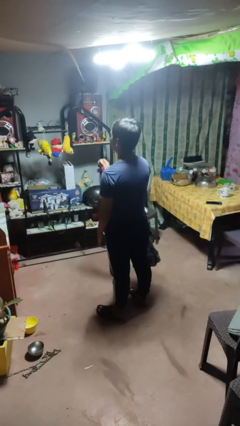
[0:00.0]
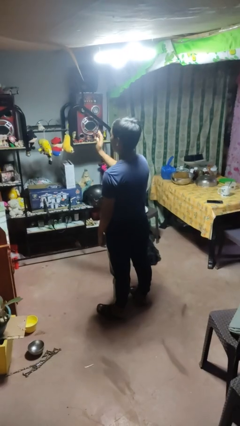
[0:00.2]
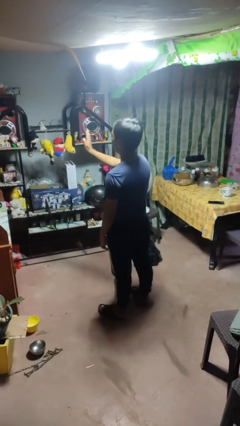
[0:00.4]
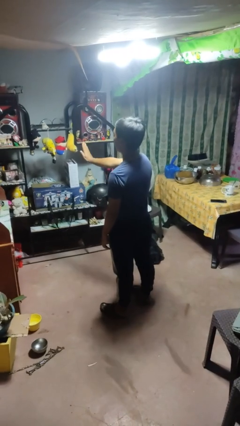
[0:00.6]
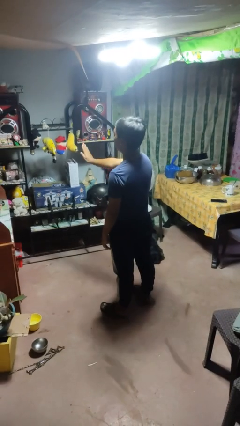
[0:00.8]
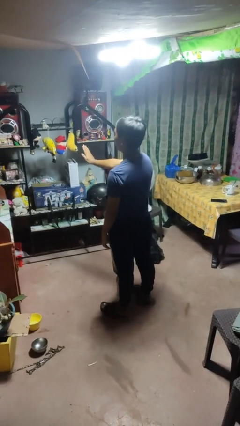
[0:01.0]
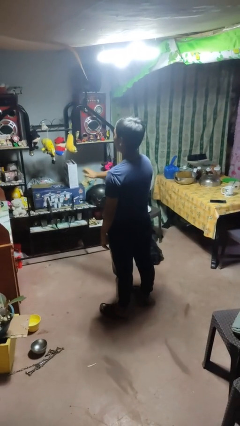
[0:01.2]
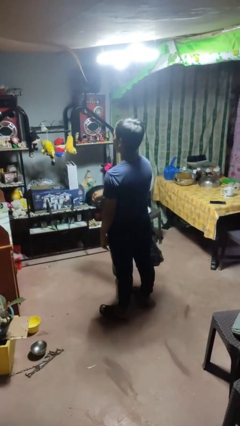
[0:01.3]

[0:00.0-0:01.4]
person gestures stop

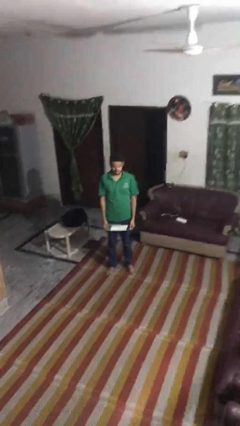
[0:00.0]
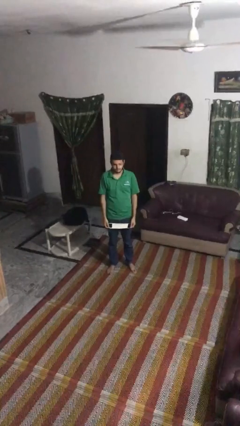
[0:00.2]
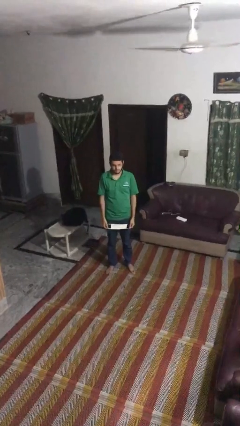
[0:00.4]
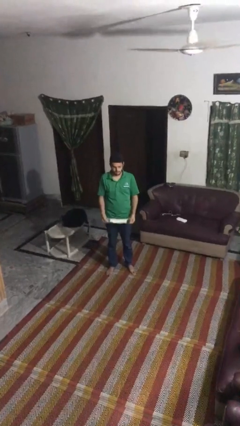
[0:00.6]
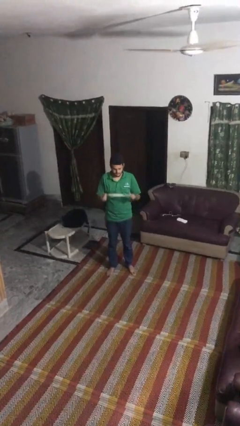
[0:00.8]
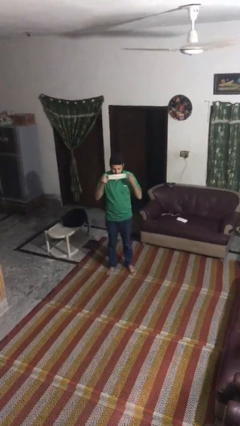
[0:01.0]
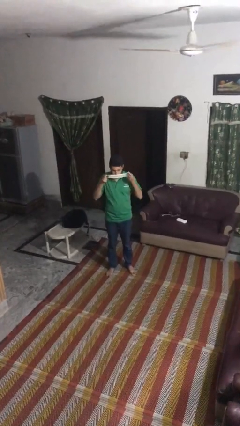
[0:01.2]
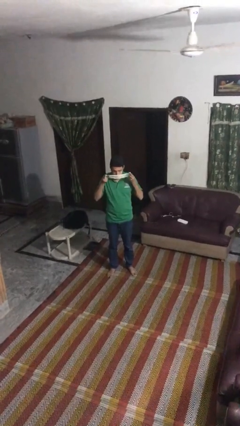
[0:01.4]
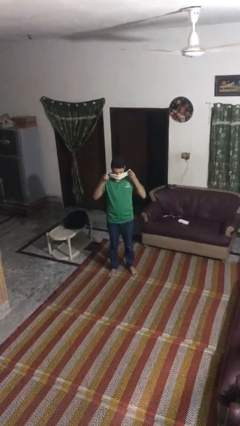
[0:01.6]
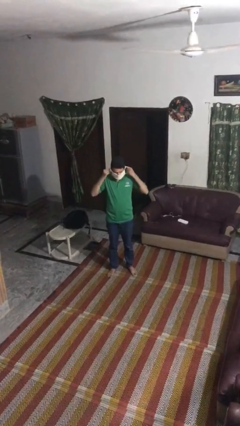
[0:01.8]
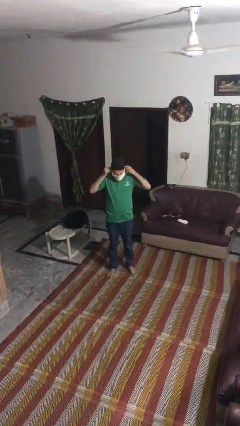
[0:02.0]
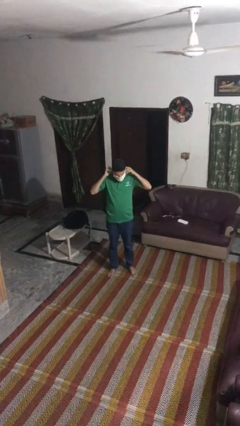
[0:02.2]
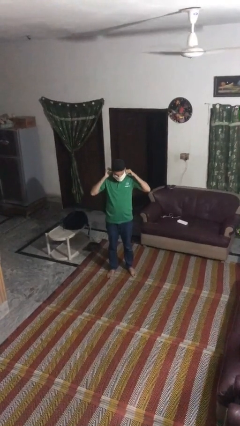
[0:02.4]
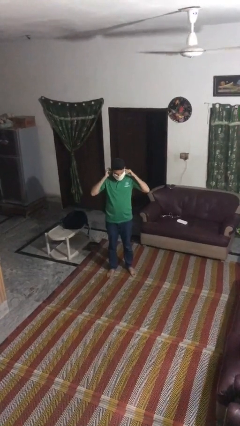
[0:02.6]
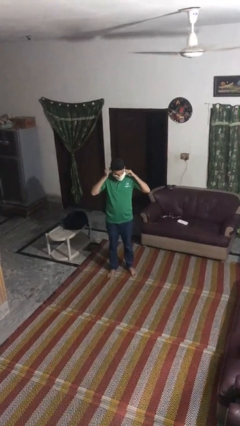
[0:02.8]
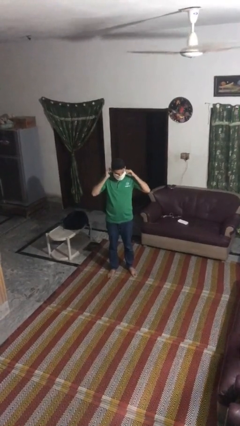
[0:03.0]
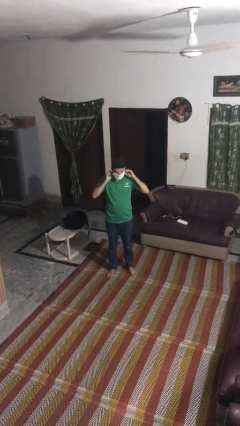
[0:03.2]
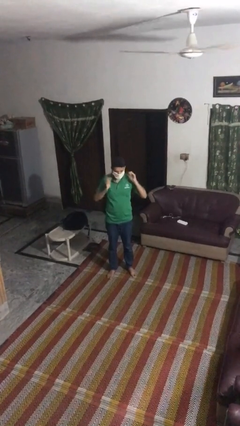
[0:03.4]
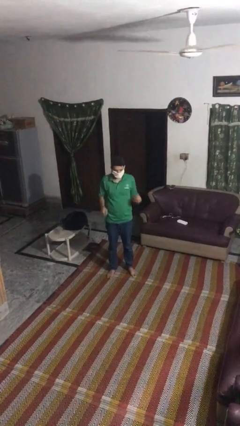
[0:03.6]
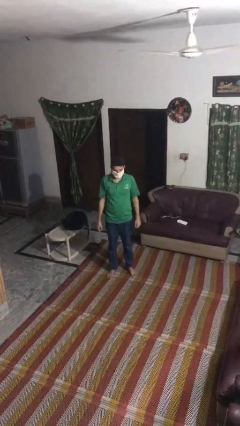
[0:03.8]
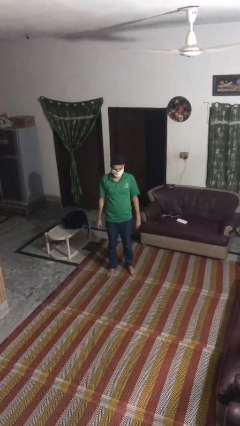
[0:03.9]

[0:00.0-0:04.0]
person puts on facemask

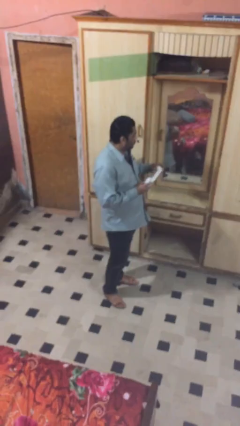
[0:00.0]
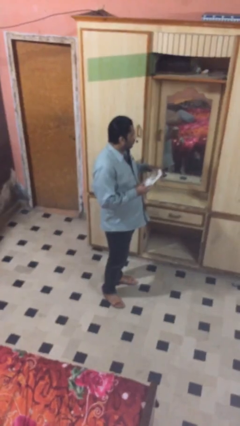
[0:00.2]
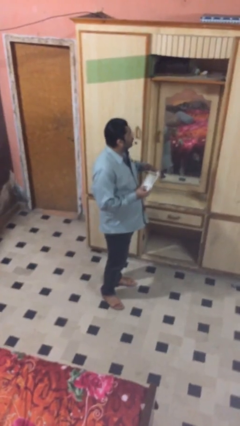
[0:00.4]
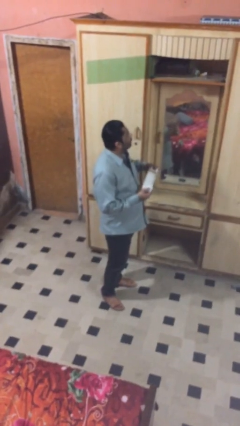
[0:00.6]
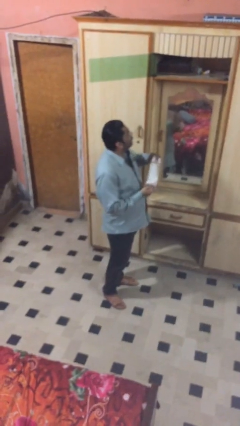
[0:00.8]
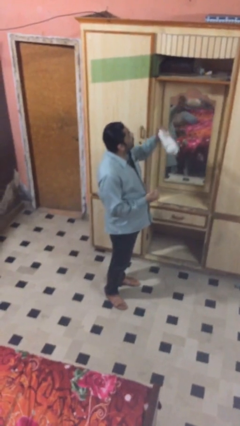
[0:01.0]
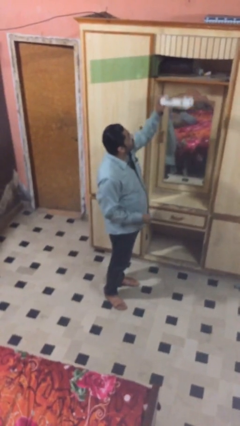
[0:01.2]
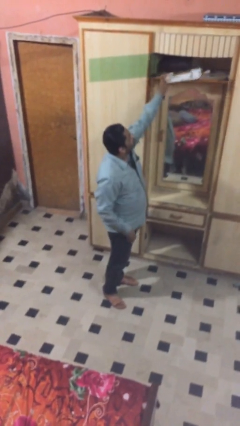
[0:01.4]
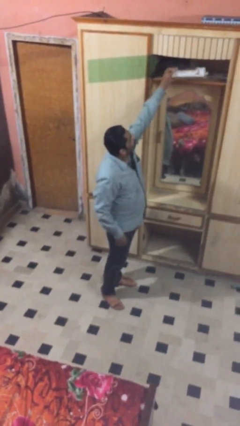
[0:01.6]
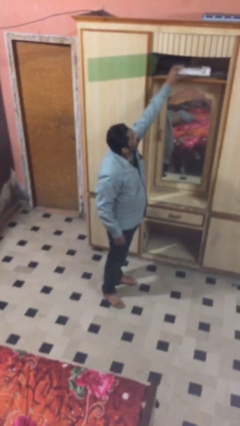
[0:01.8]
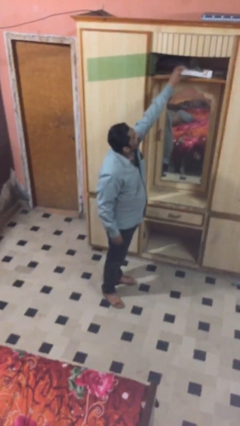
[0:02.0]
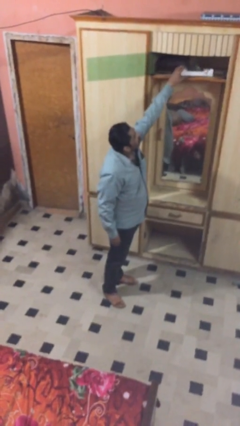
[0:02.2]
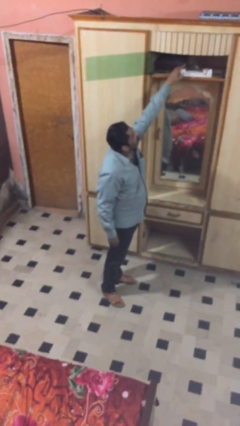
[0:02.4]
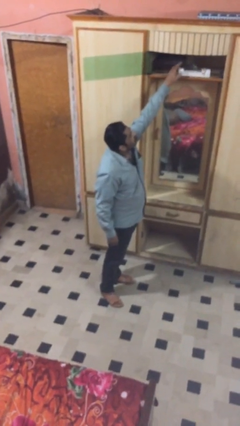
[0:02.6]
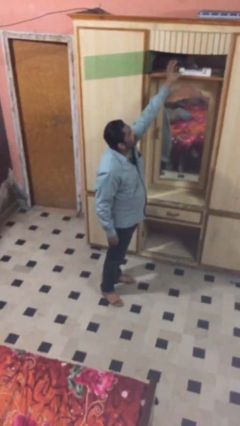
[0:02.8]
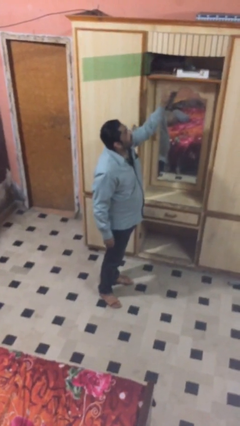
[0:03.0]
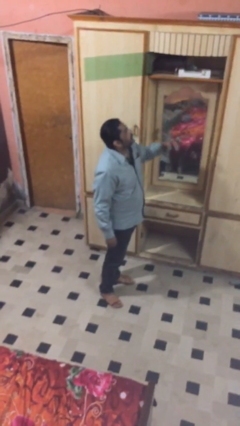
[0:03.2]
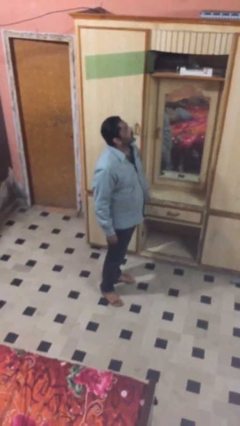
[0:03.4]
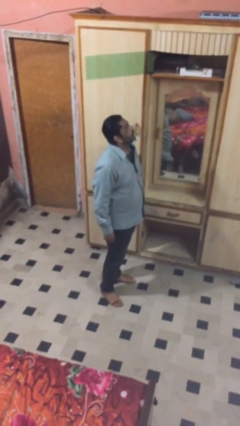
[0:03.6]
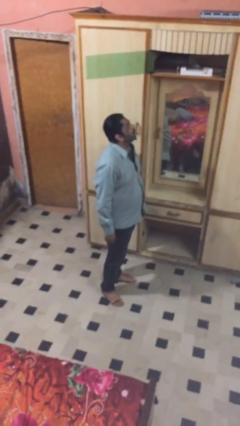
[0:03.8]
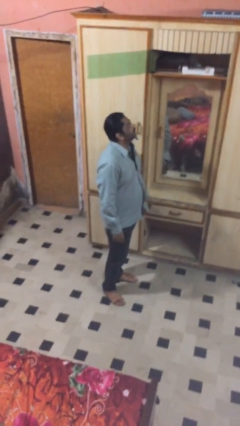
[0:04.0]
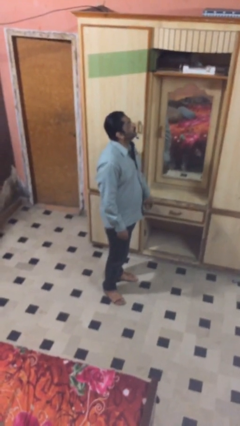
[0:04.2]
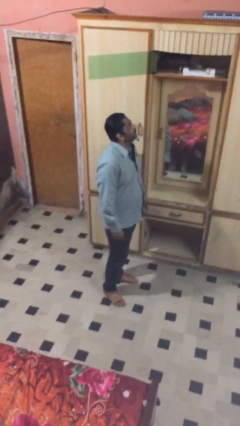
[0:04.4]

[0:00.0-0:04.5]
person puts down object on shelf

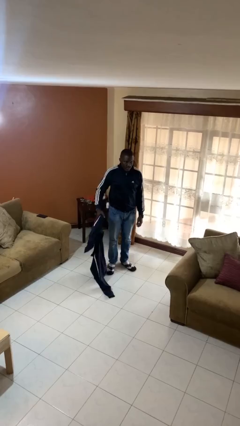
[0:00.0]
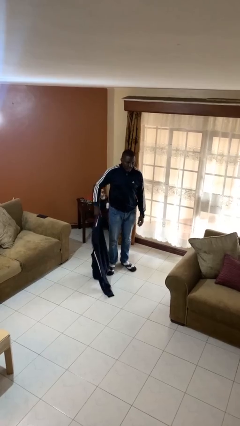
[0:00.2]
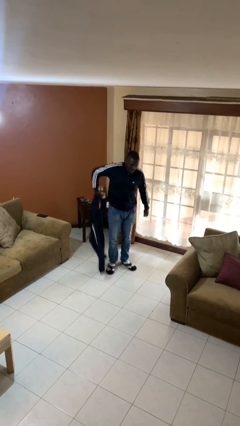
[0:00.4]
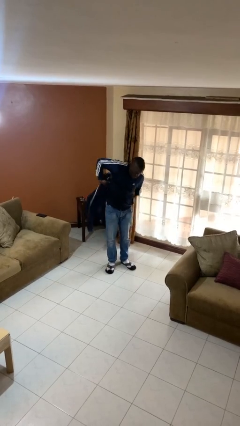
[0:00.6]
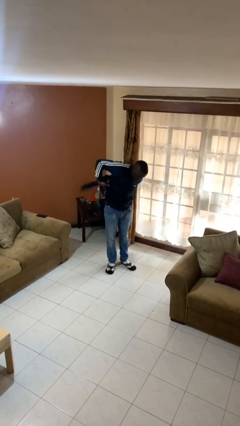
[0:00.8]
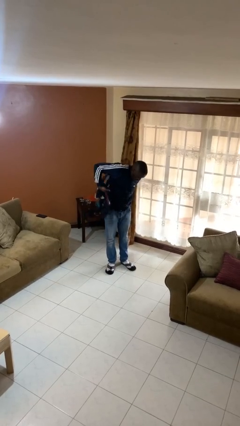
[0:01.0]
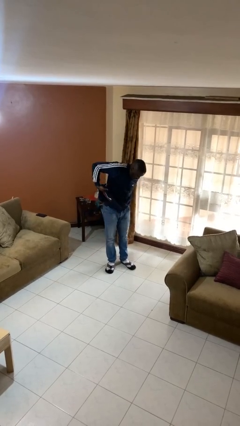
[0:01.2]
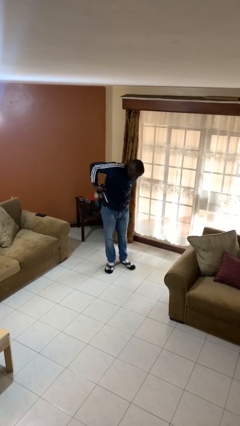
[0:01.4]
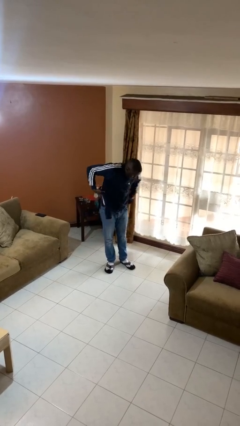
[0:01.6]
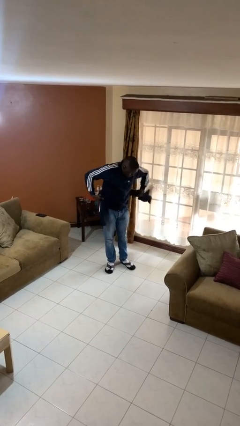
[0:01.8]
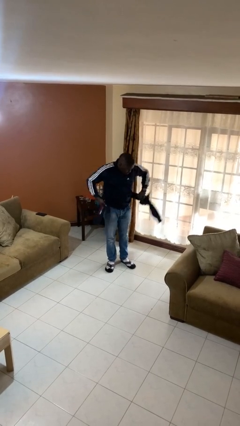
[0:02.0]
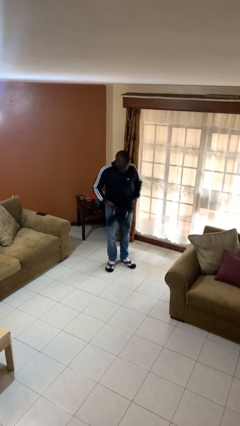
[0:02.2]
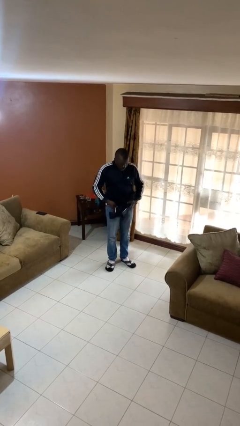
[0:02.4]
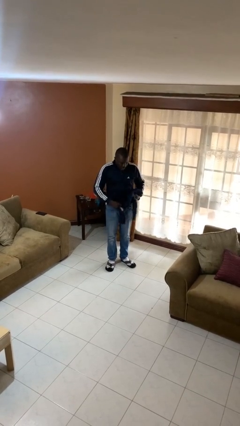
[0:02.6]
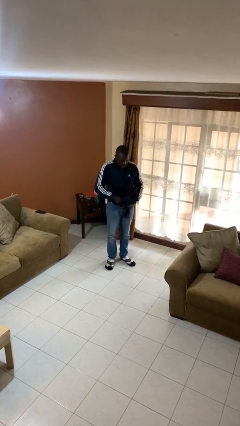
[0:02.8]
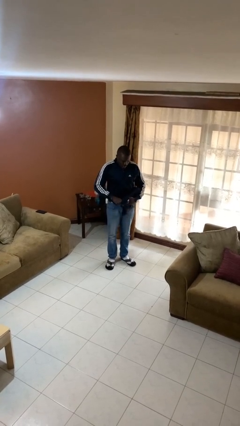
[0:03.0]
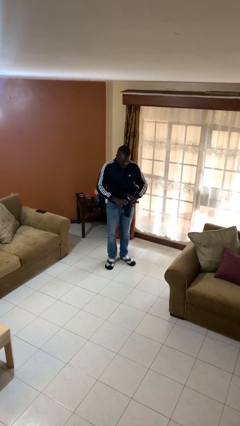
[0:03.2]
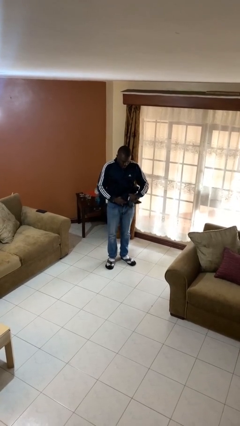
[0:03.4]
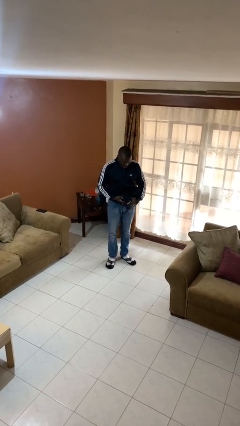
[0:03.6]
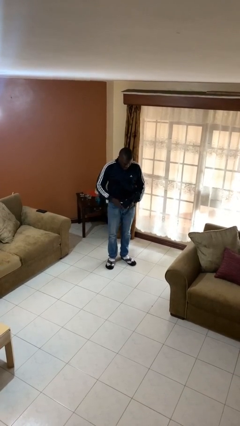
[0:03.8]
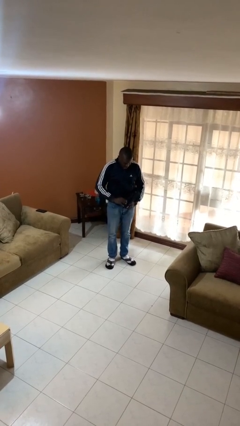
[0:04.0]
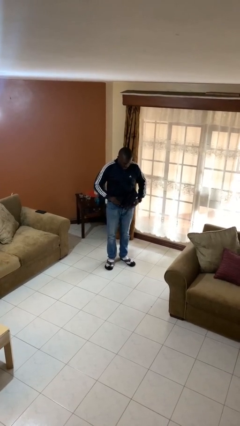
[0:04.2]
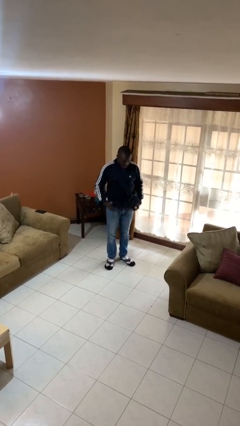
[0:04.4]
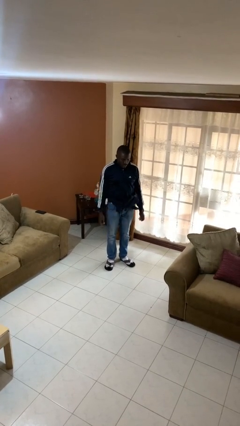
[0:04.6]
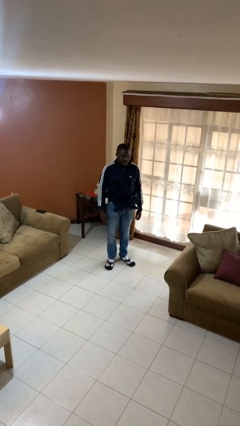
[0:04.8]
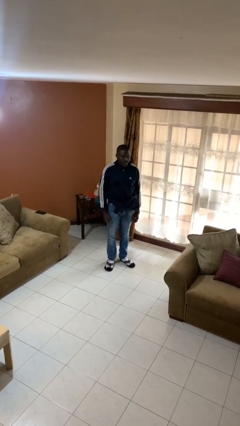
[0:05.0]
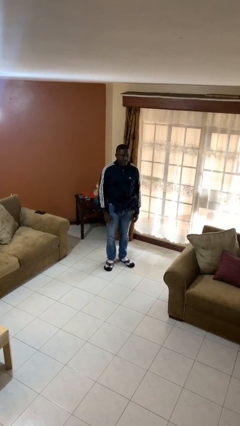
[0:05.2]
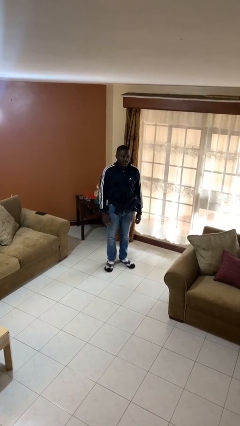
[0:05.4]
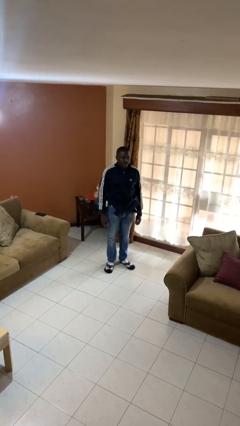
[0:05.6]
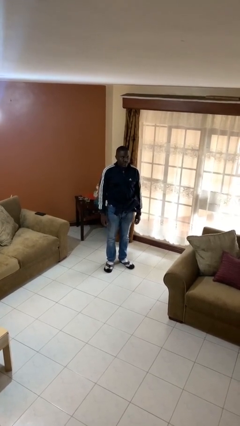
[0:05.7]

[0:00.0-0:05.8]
person ties jacket around waist

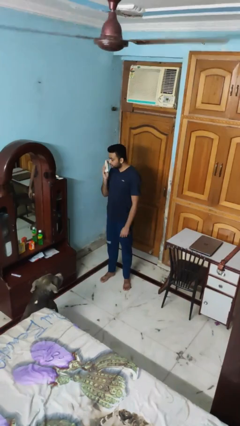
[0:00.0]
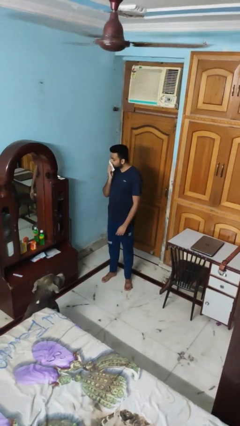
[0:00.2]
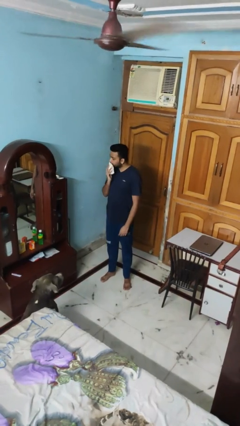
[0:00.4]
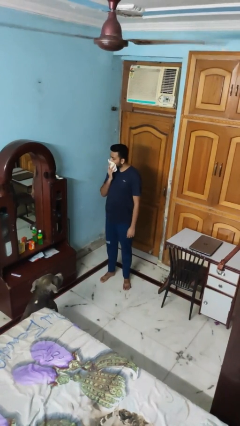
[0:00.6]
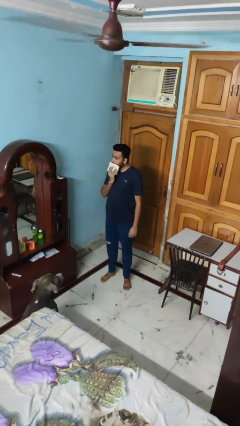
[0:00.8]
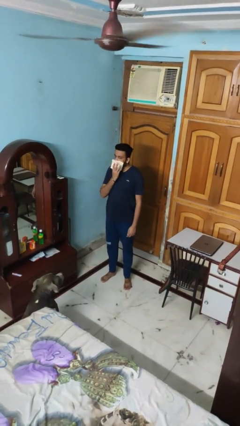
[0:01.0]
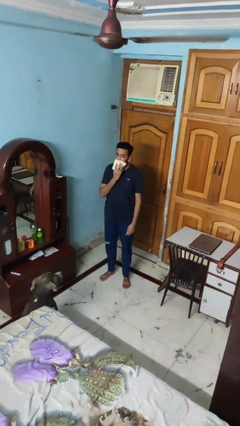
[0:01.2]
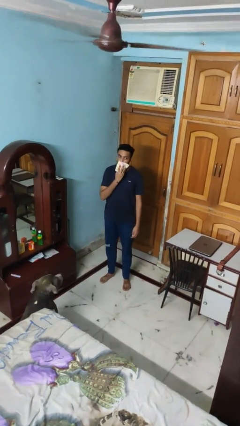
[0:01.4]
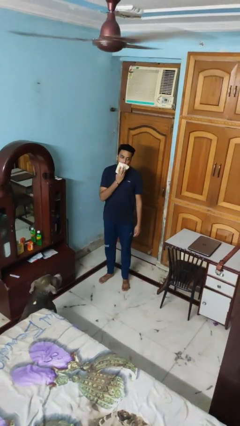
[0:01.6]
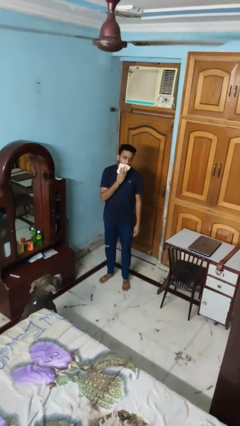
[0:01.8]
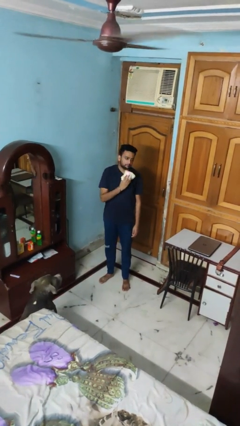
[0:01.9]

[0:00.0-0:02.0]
person wipes mouth with napkin
